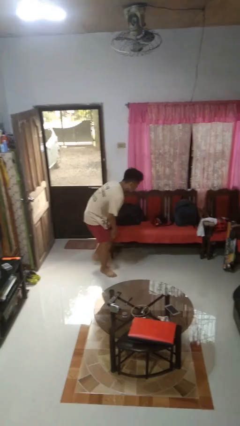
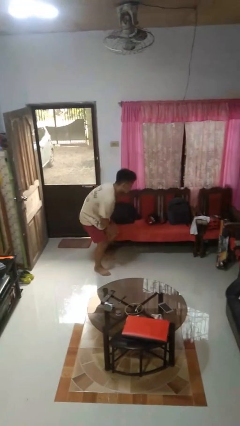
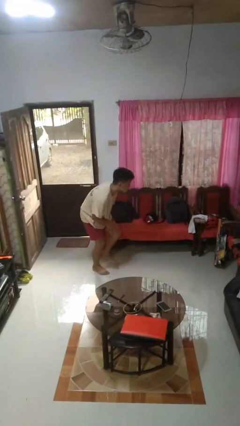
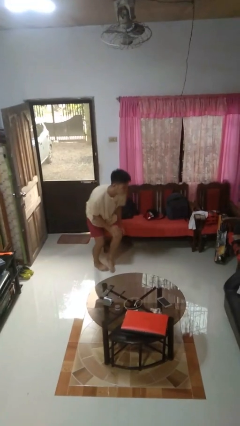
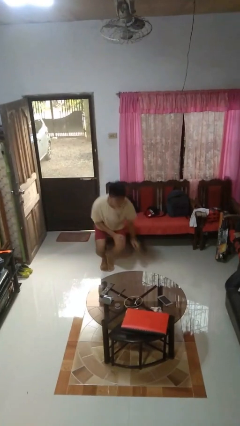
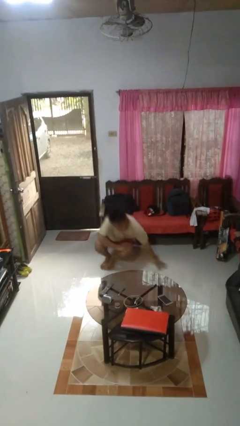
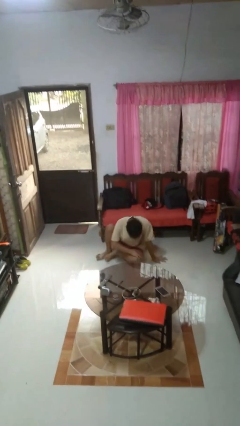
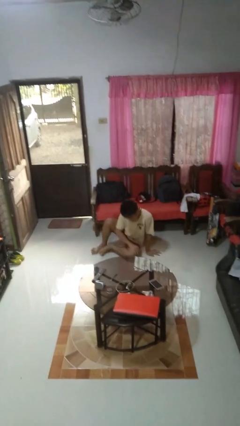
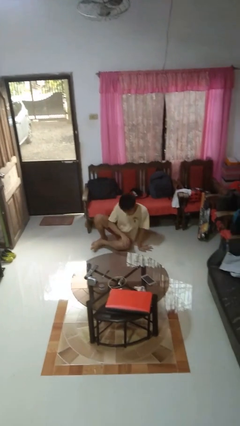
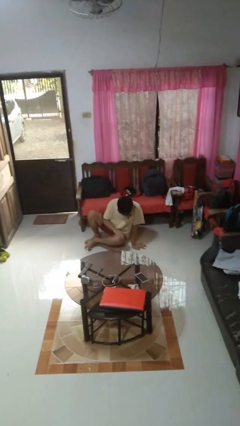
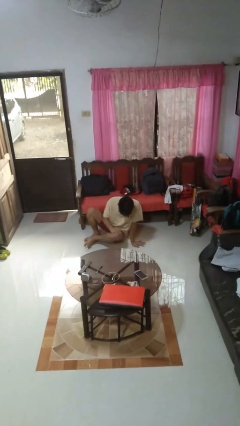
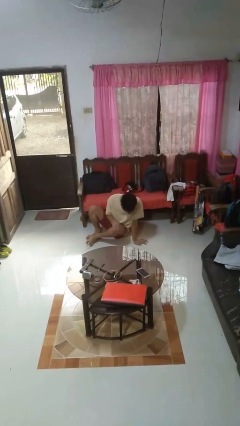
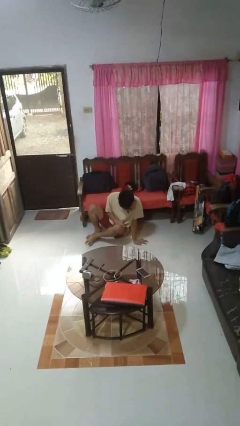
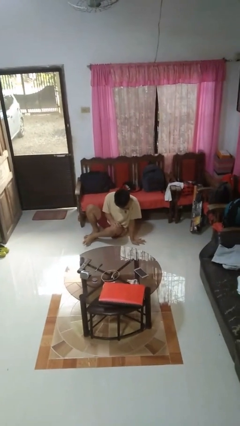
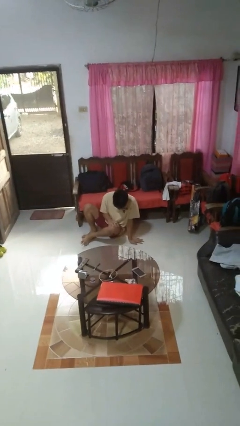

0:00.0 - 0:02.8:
person lies down on floor

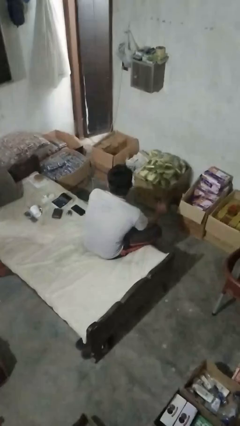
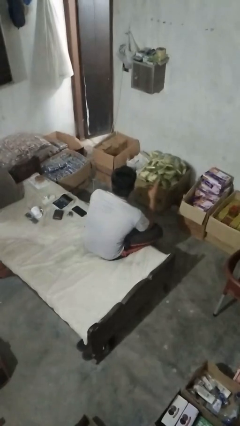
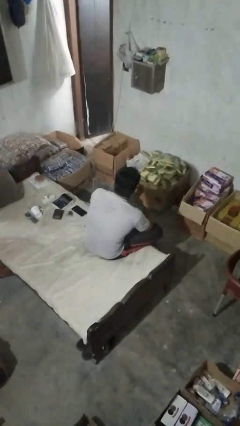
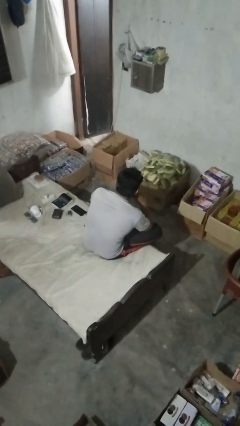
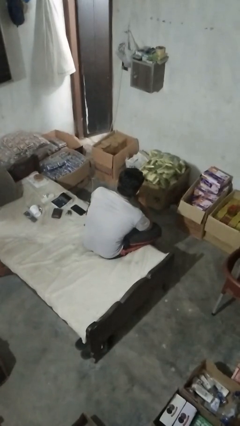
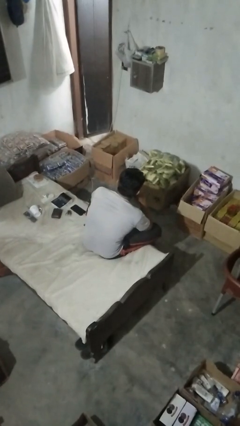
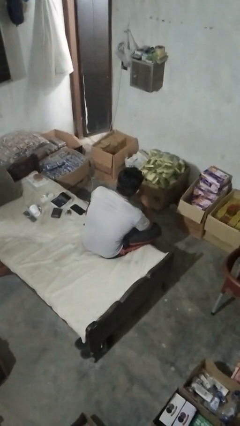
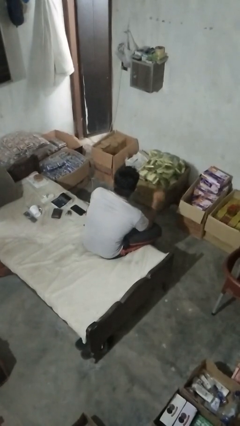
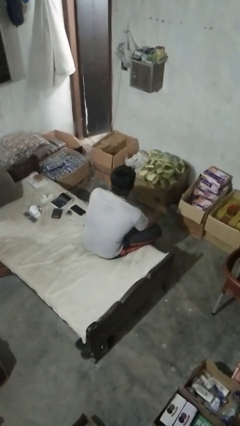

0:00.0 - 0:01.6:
person strokes chin

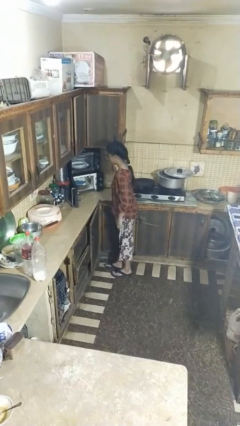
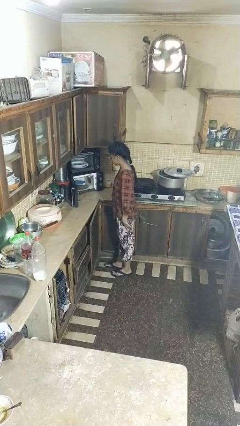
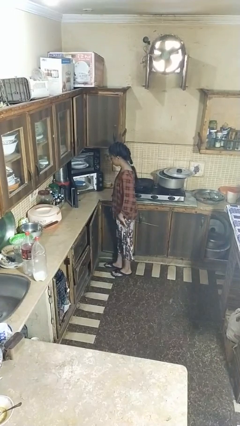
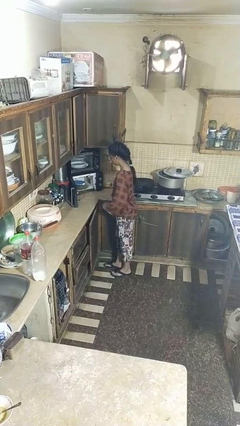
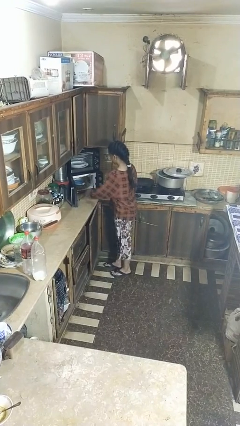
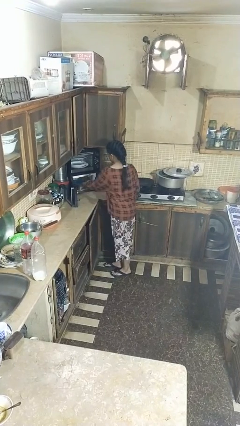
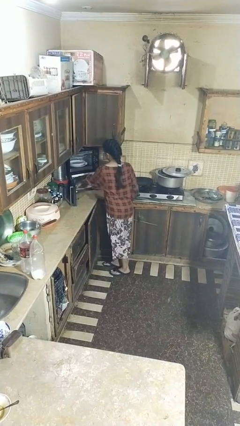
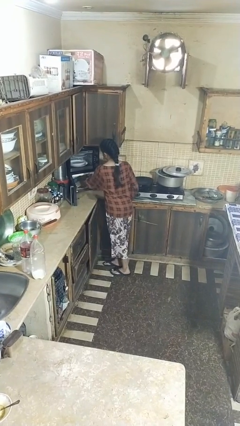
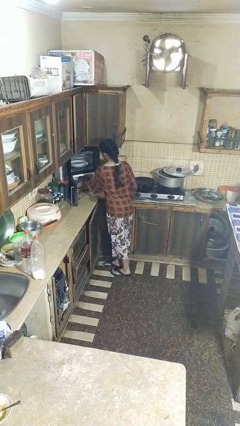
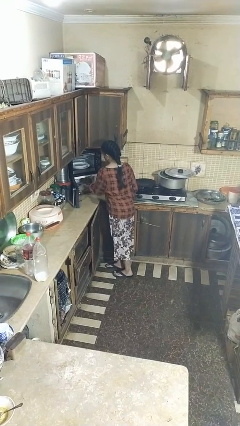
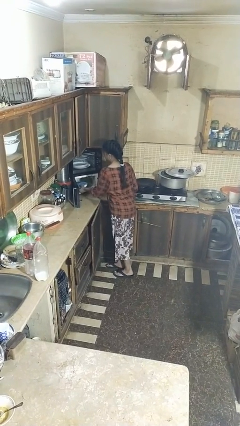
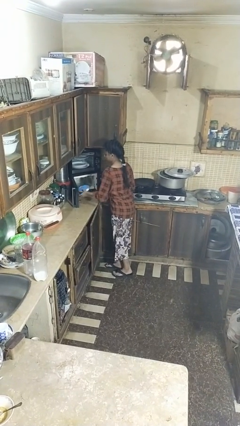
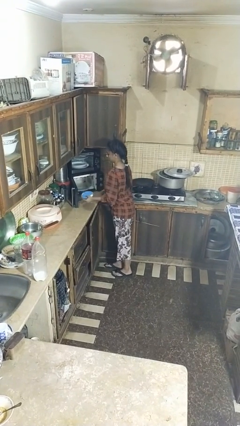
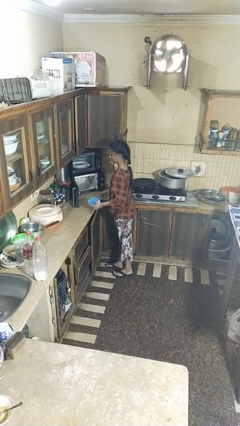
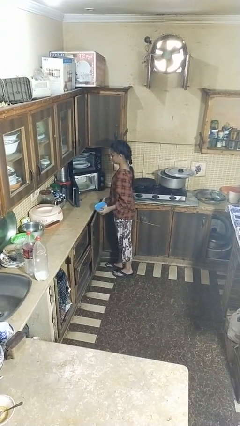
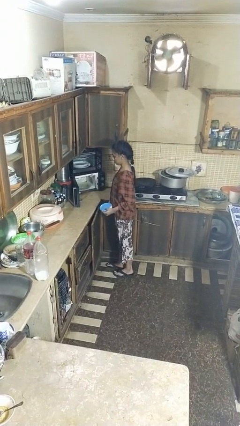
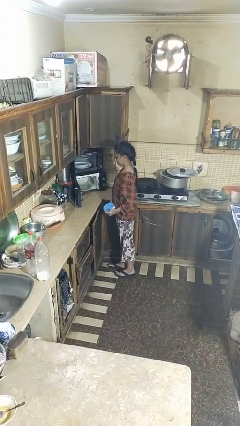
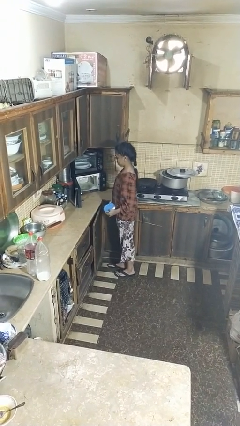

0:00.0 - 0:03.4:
person takes object from microwave

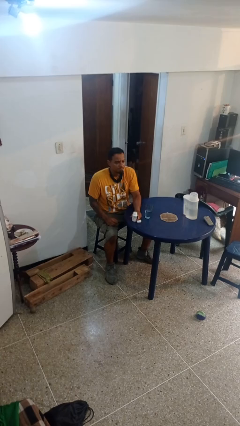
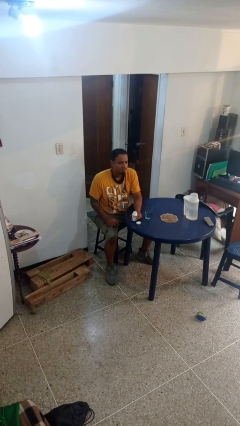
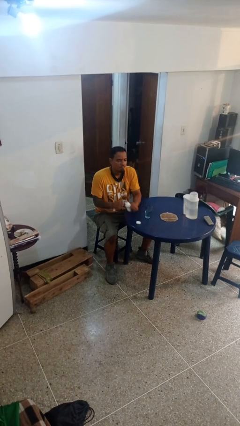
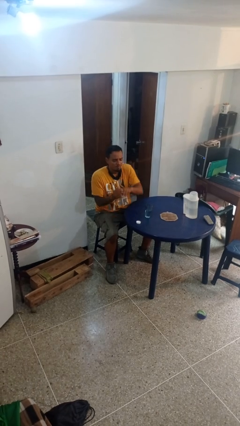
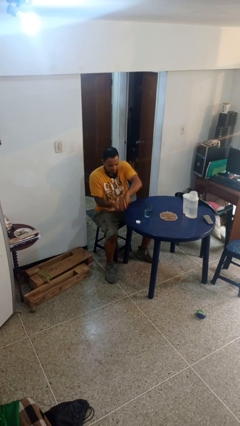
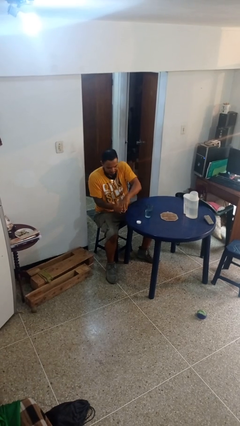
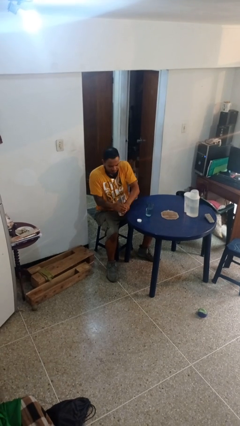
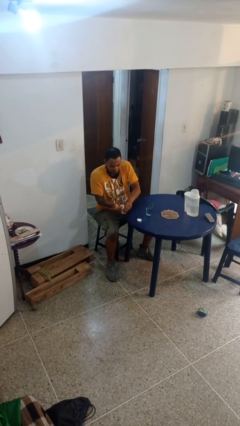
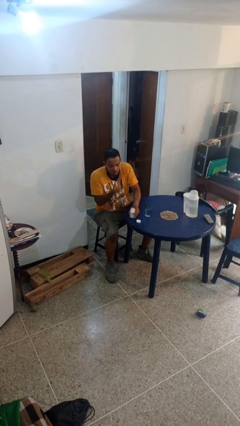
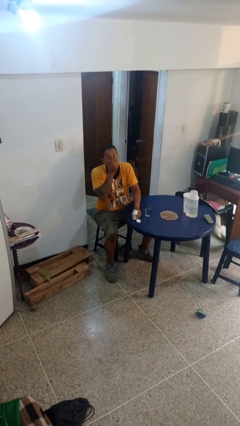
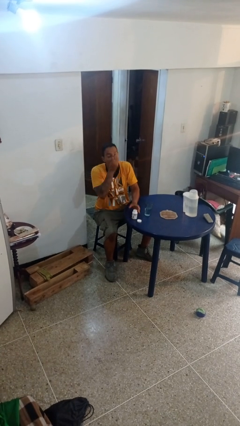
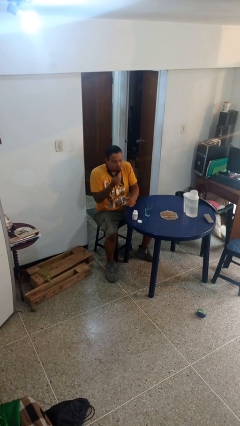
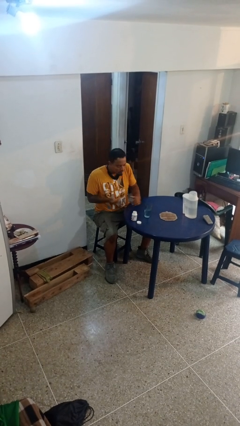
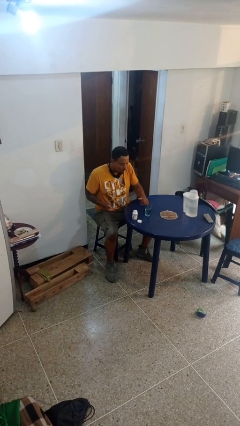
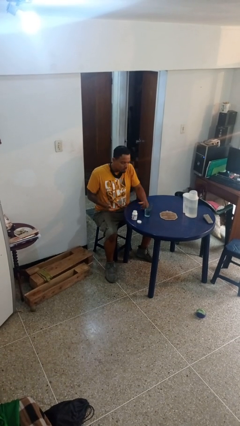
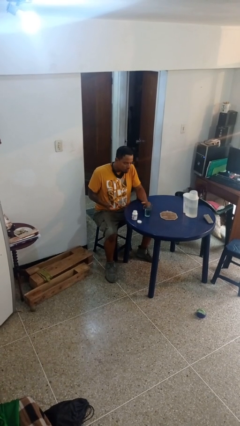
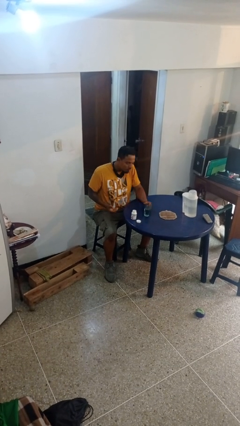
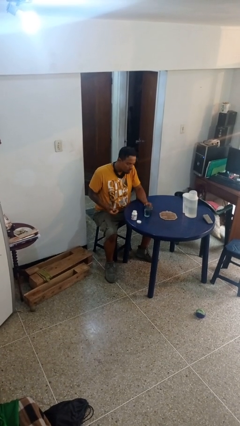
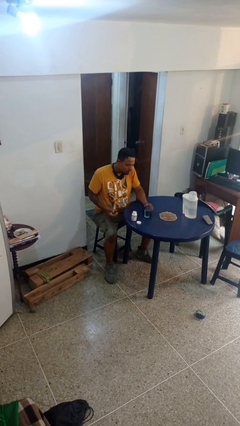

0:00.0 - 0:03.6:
person takes medicine pills

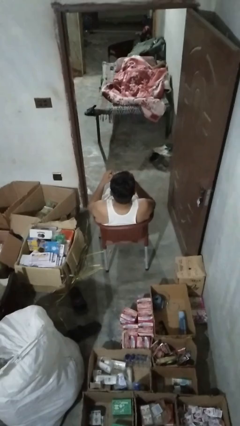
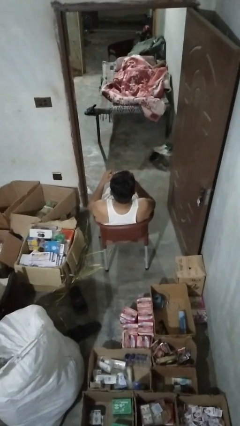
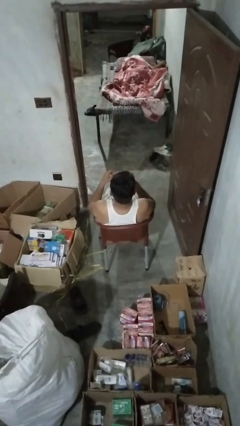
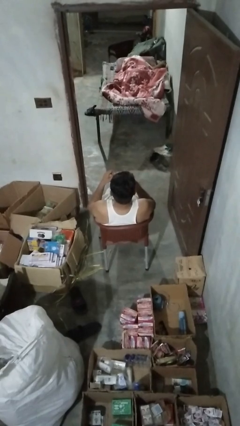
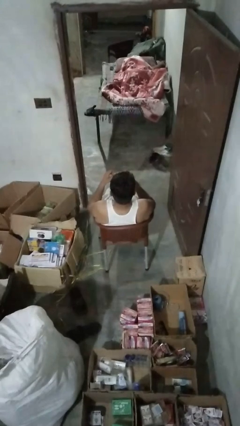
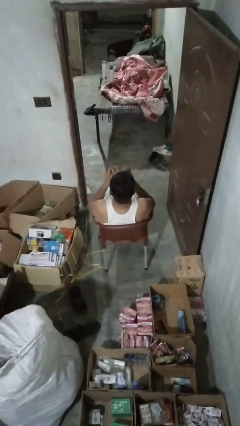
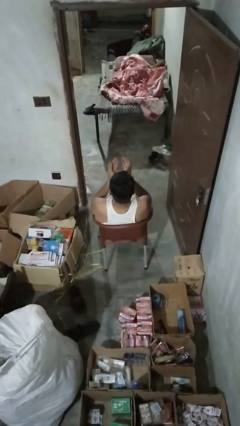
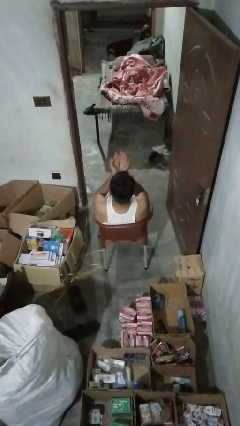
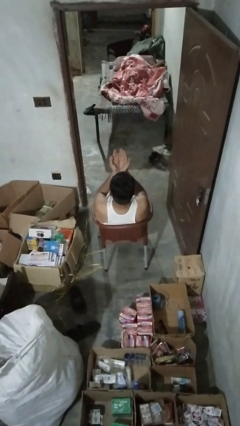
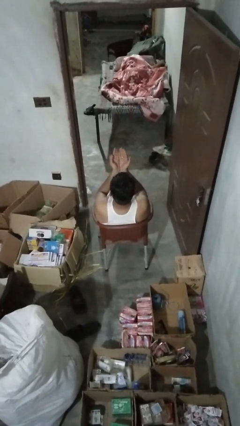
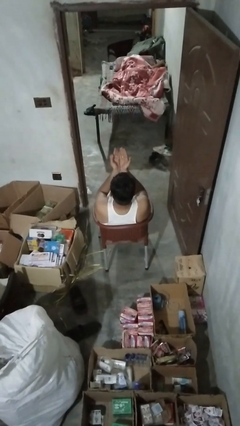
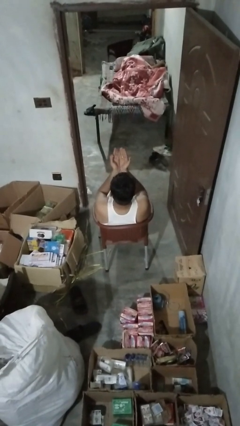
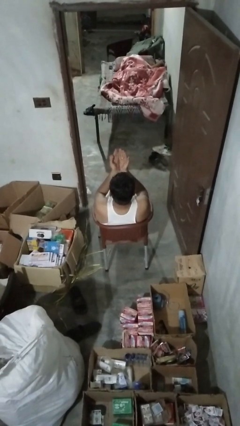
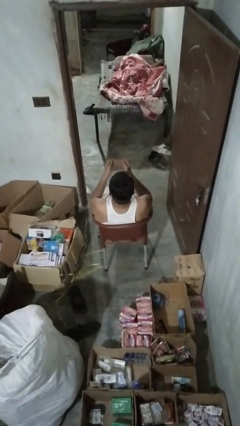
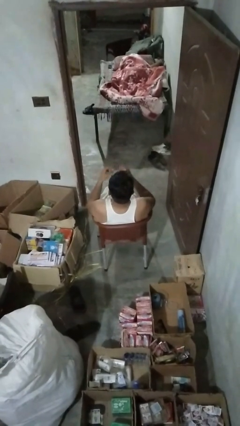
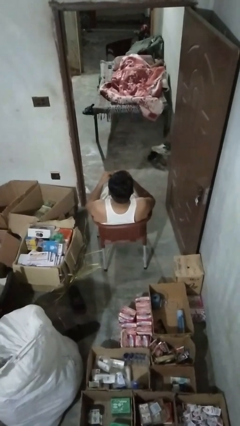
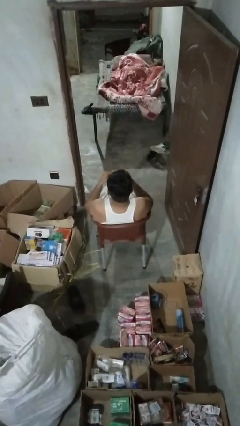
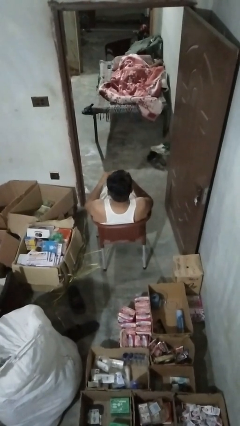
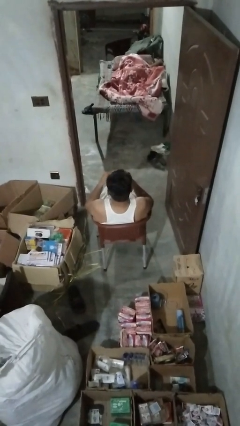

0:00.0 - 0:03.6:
person prays

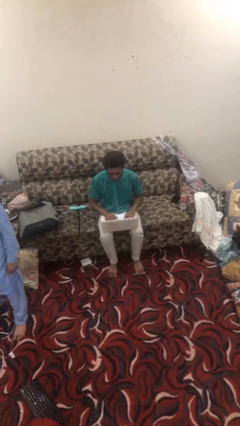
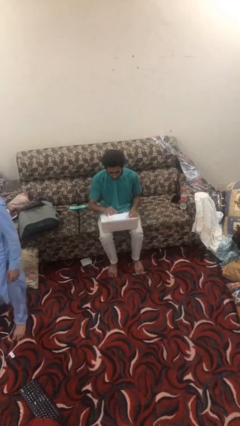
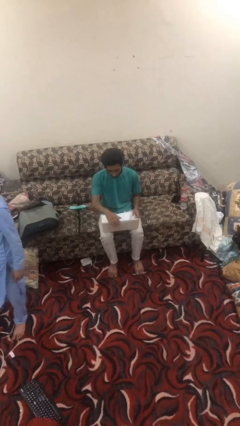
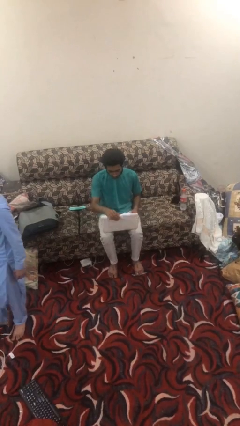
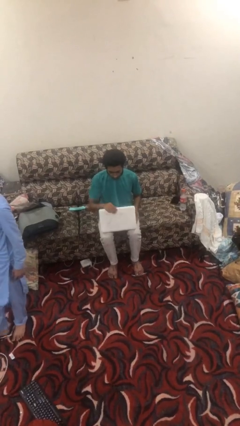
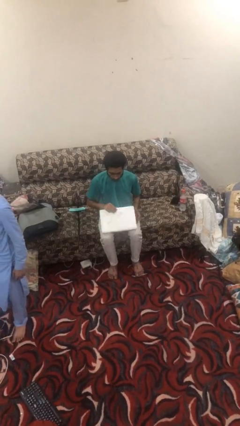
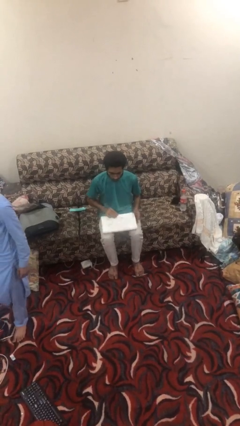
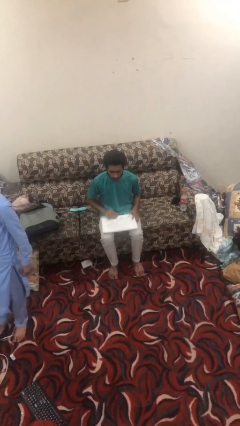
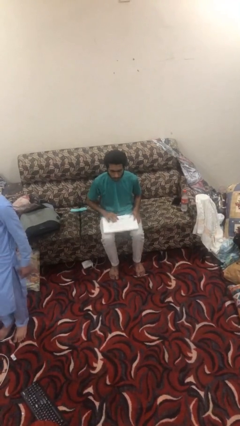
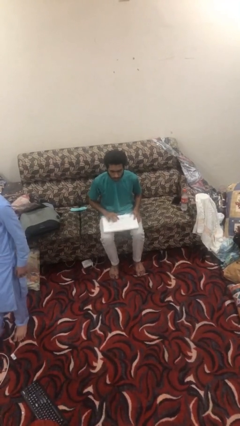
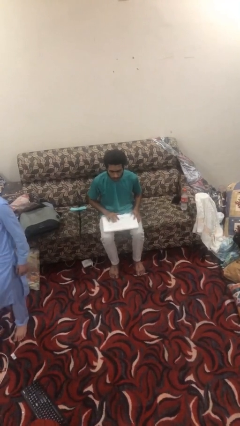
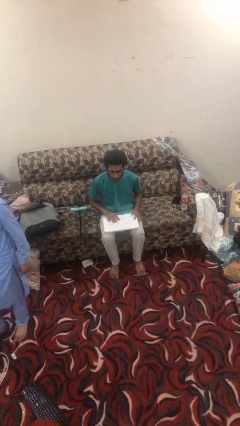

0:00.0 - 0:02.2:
person closes laptop
